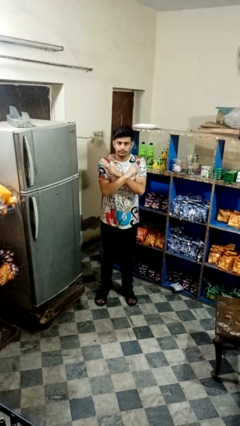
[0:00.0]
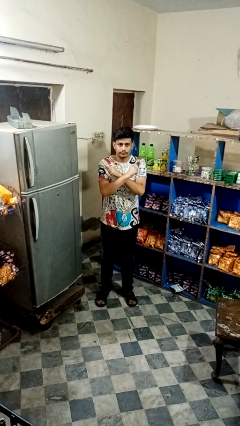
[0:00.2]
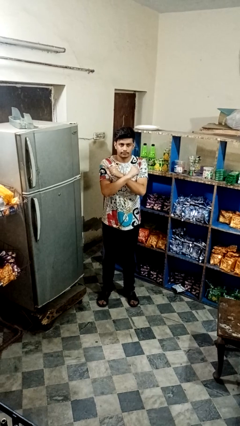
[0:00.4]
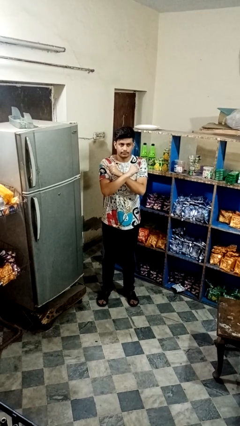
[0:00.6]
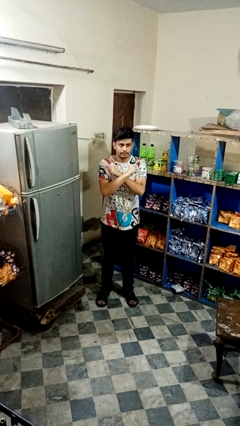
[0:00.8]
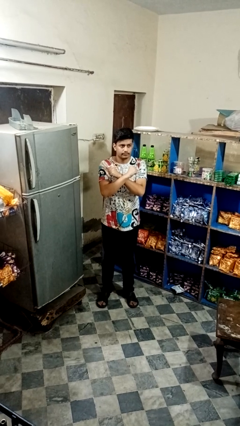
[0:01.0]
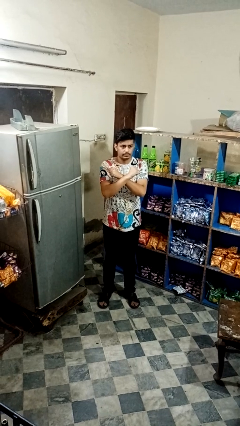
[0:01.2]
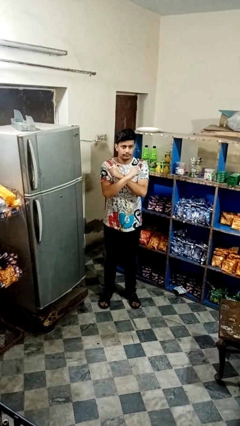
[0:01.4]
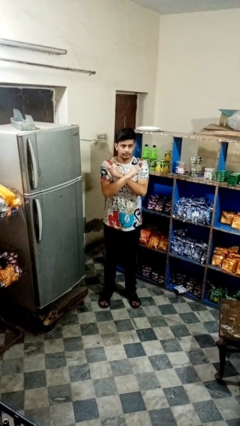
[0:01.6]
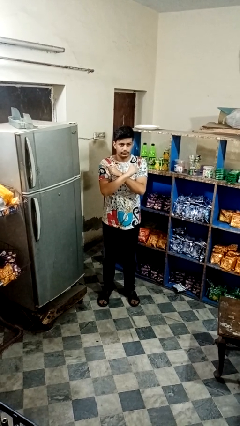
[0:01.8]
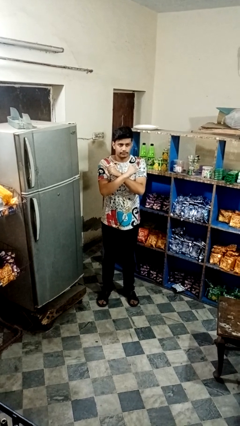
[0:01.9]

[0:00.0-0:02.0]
person gestures arms x

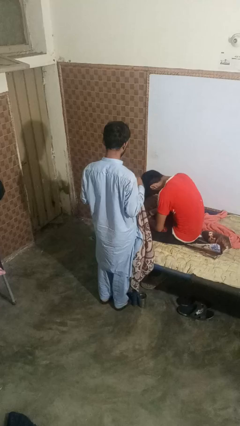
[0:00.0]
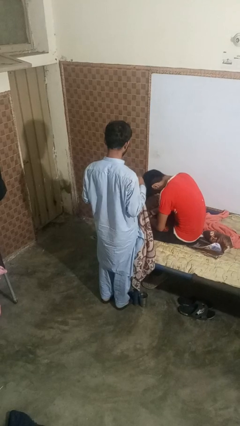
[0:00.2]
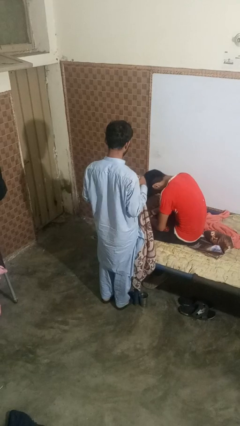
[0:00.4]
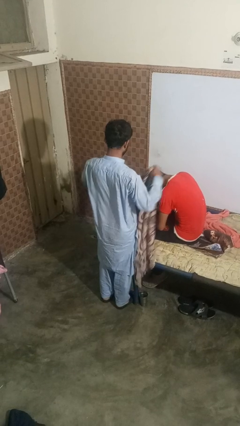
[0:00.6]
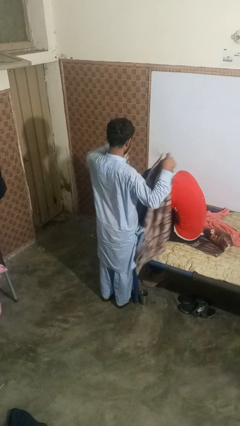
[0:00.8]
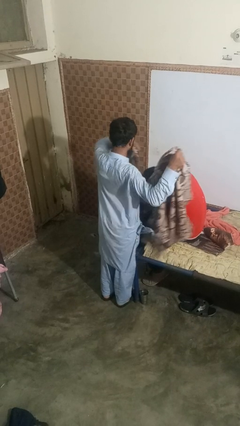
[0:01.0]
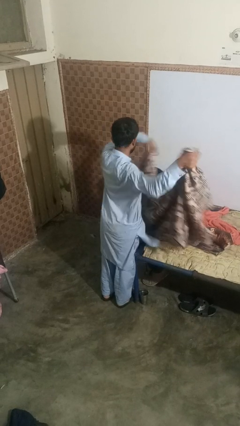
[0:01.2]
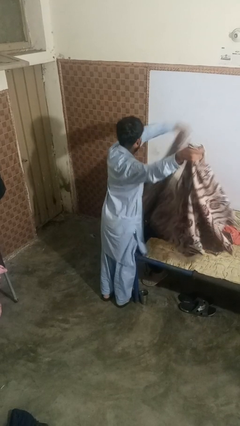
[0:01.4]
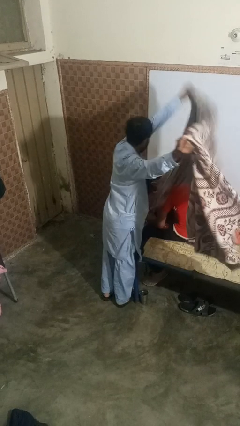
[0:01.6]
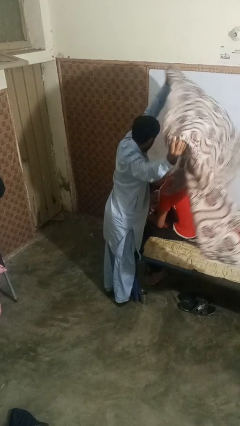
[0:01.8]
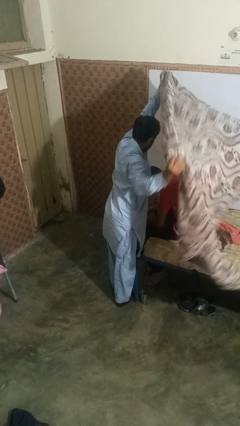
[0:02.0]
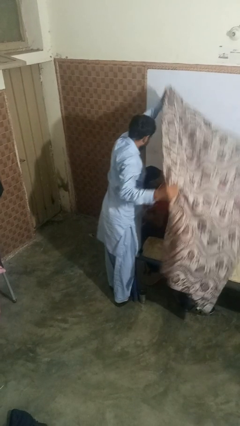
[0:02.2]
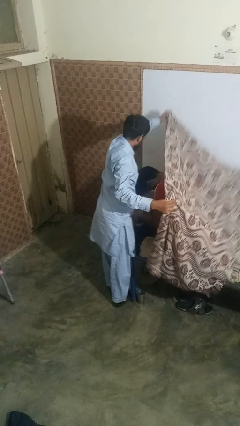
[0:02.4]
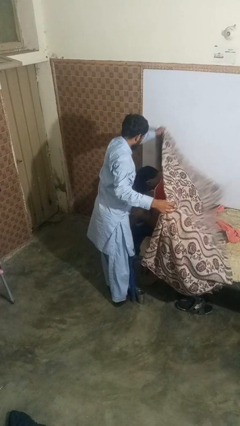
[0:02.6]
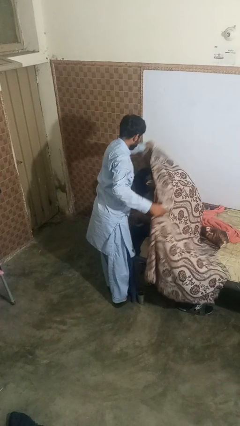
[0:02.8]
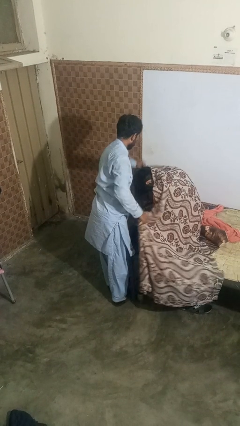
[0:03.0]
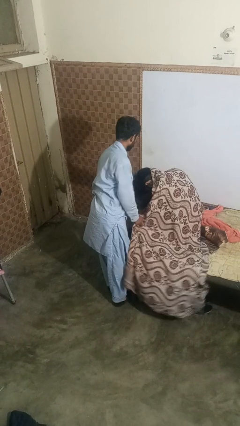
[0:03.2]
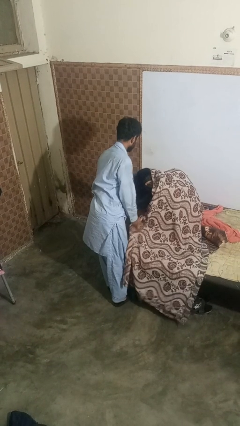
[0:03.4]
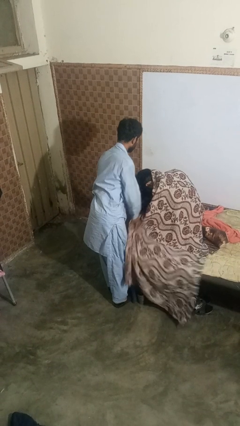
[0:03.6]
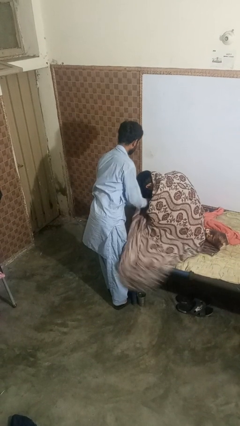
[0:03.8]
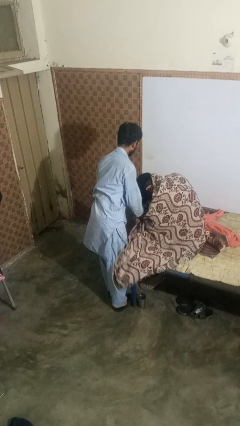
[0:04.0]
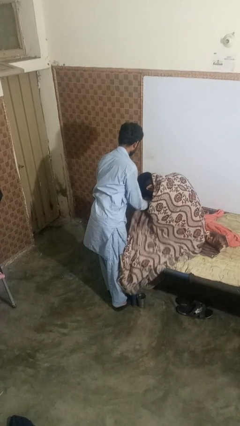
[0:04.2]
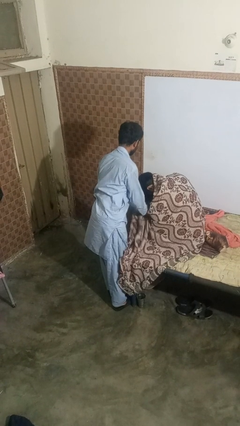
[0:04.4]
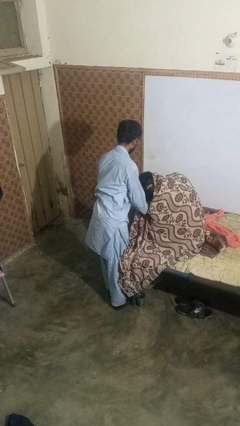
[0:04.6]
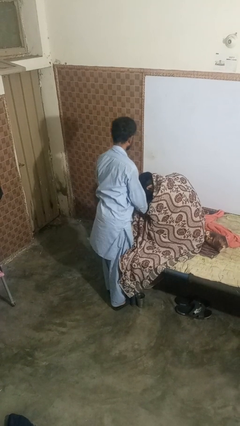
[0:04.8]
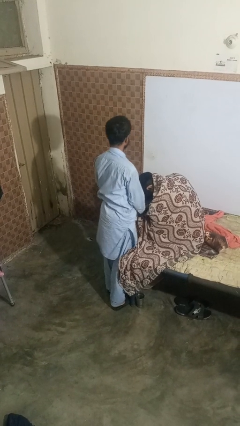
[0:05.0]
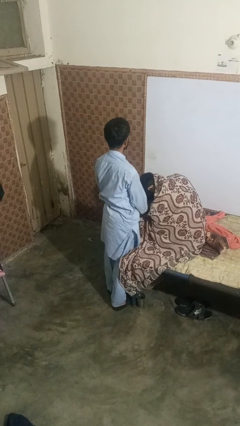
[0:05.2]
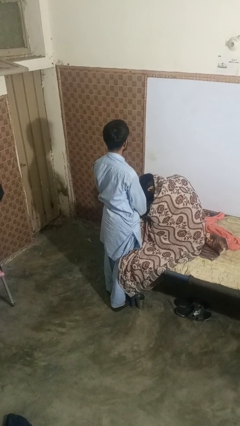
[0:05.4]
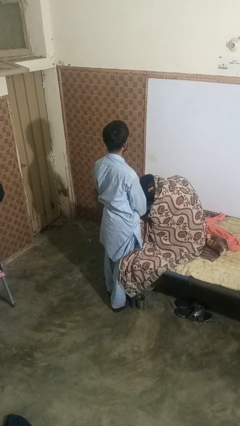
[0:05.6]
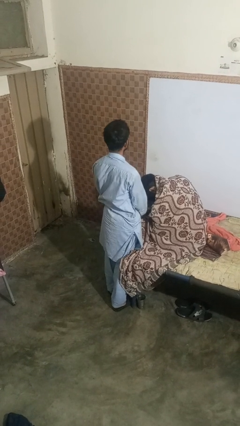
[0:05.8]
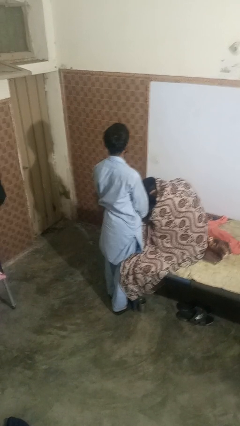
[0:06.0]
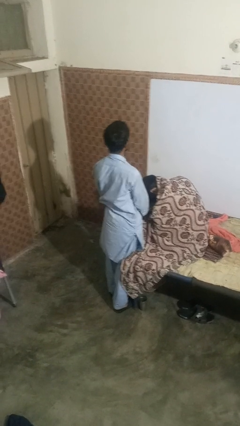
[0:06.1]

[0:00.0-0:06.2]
person covers friend with blanket

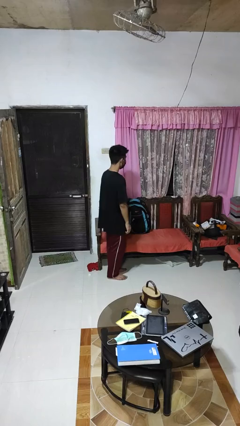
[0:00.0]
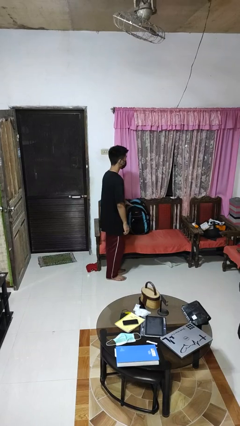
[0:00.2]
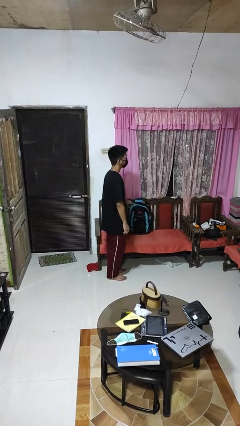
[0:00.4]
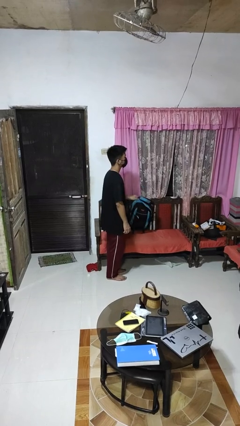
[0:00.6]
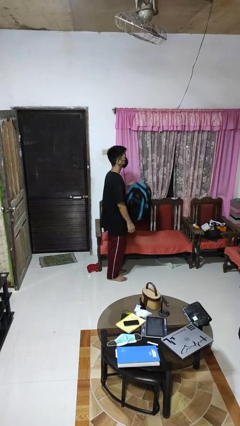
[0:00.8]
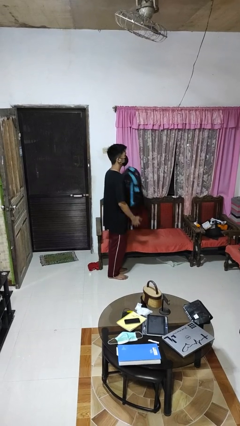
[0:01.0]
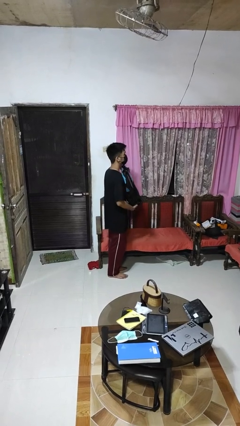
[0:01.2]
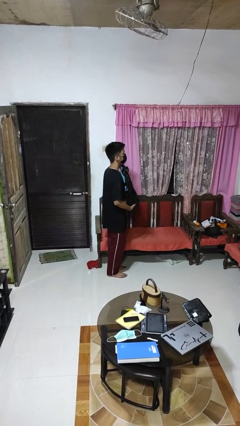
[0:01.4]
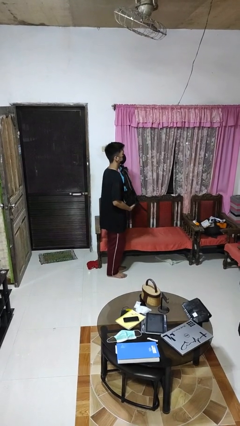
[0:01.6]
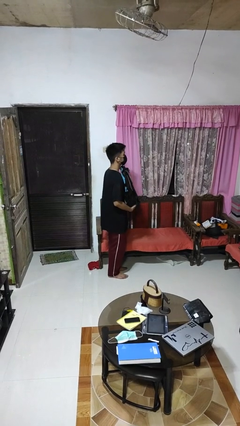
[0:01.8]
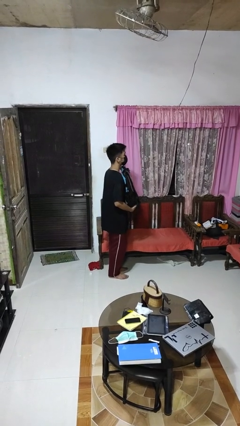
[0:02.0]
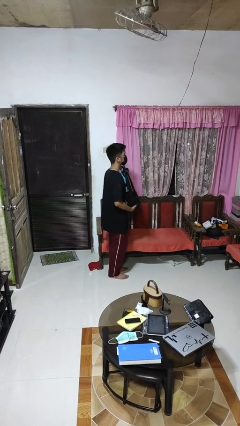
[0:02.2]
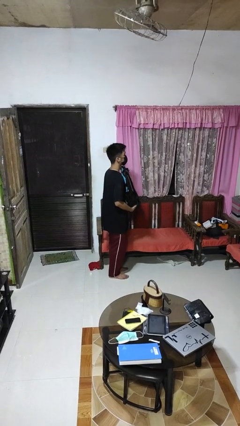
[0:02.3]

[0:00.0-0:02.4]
person picks up object from couch

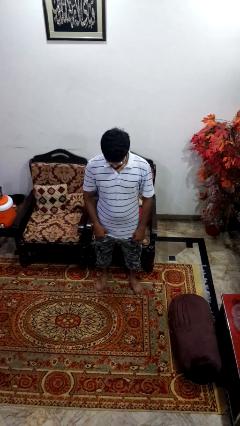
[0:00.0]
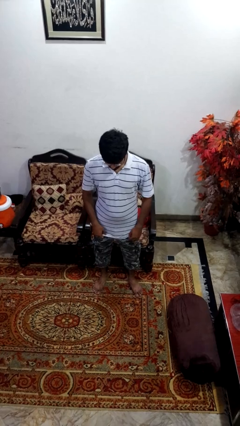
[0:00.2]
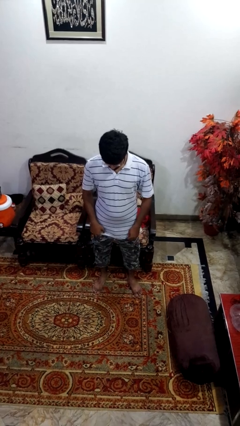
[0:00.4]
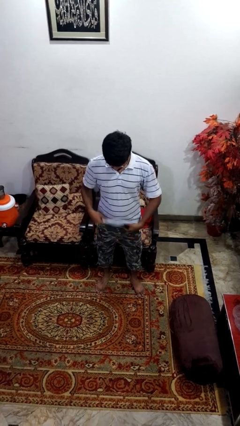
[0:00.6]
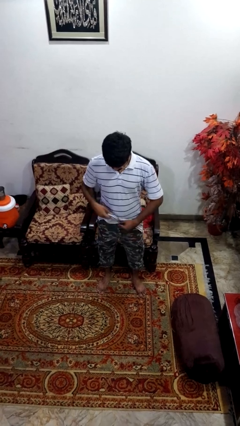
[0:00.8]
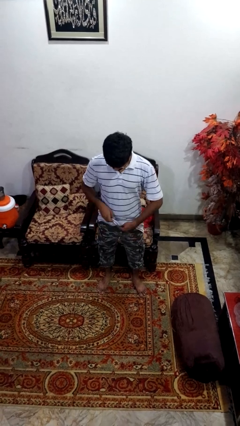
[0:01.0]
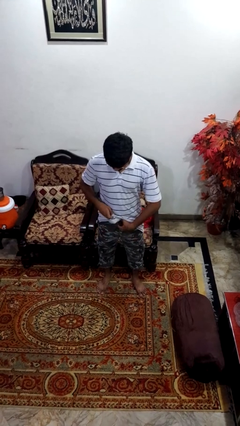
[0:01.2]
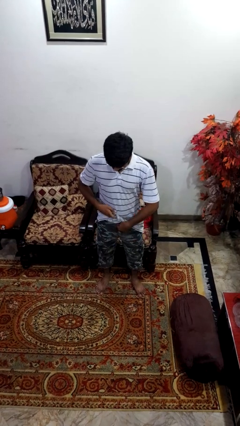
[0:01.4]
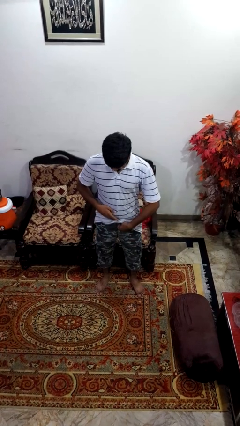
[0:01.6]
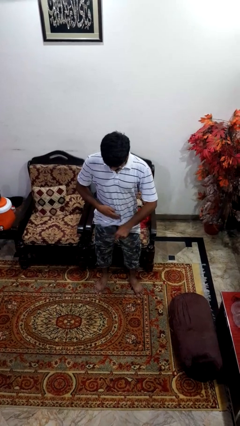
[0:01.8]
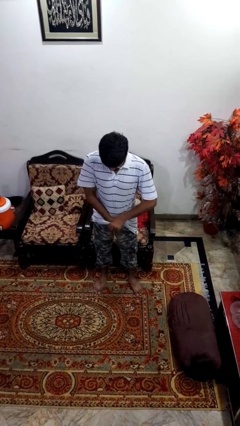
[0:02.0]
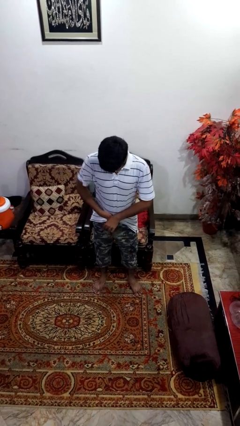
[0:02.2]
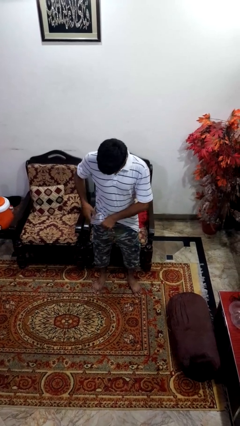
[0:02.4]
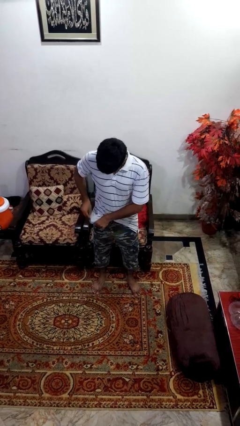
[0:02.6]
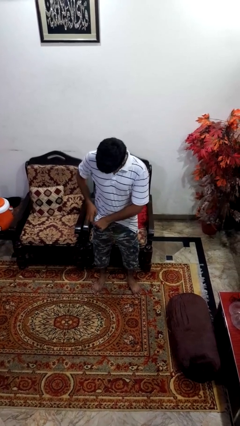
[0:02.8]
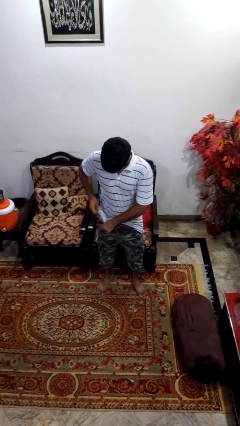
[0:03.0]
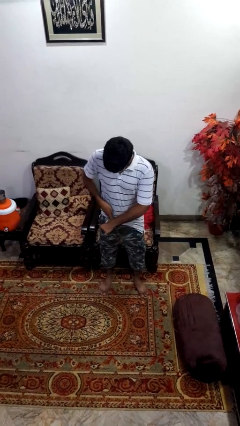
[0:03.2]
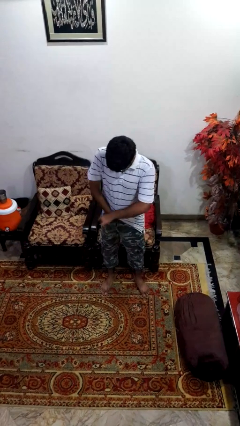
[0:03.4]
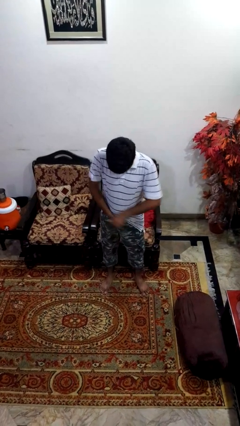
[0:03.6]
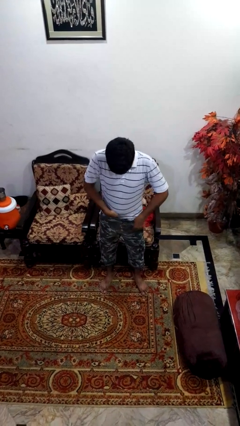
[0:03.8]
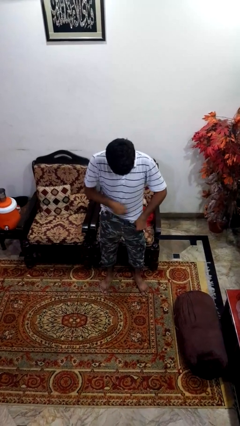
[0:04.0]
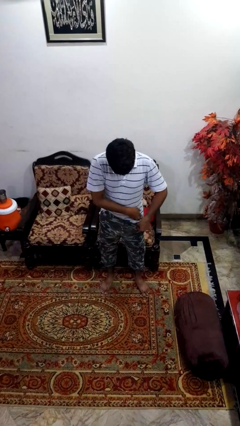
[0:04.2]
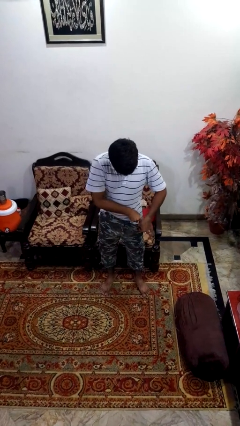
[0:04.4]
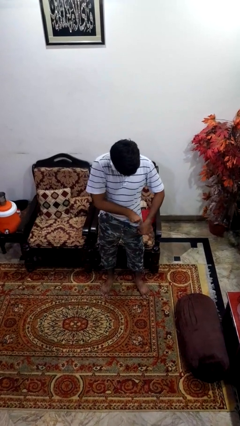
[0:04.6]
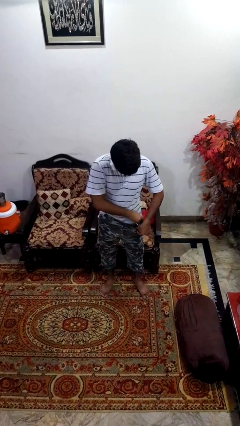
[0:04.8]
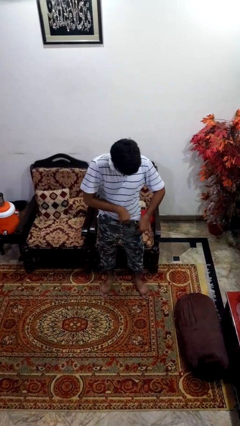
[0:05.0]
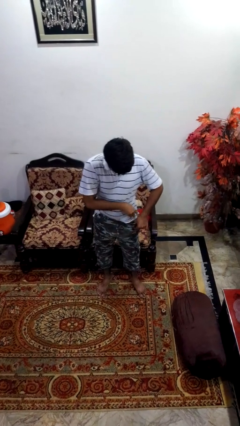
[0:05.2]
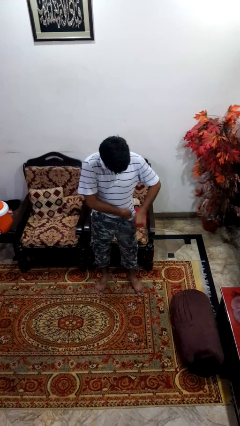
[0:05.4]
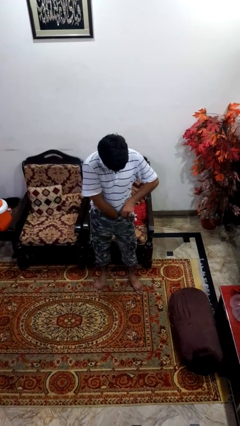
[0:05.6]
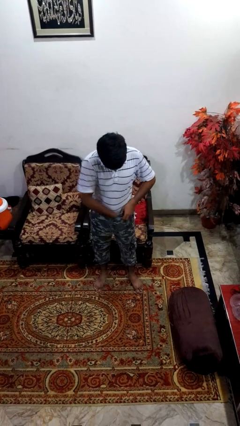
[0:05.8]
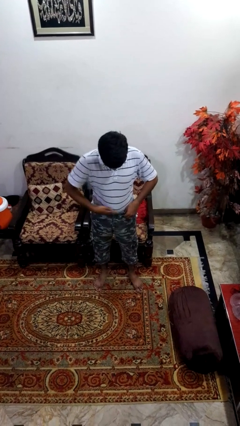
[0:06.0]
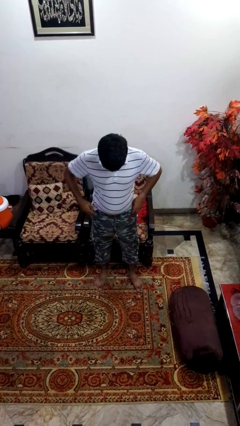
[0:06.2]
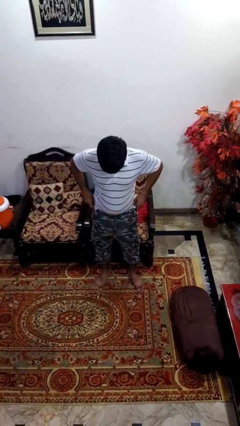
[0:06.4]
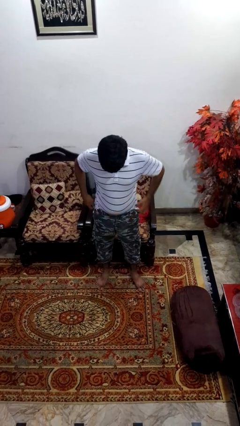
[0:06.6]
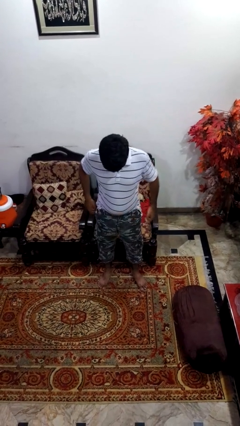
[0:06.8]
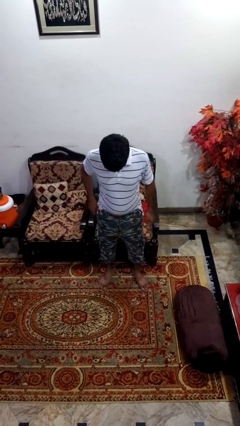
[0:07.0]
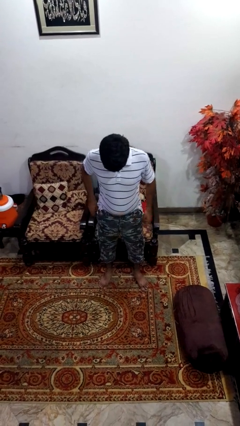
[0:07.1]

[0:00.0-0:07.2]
person tucks in shirt

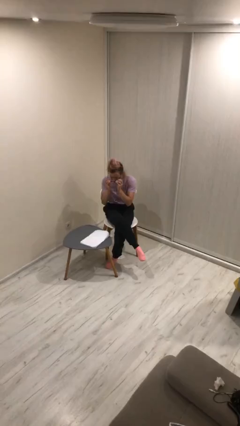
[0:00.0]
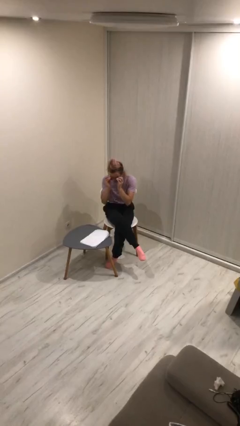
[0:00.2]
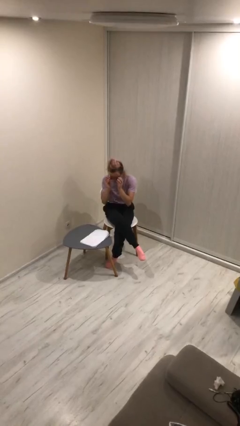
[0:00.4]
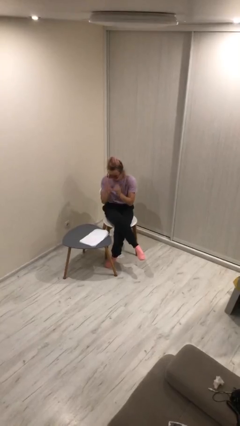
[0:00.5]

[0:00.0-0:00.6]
person puts on glasses
